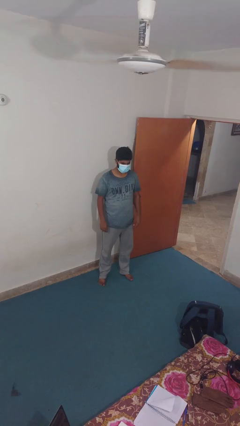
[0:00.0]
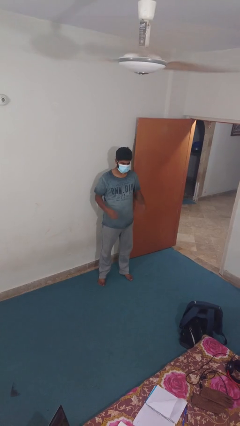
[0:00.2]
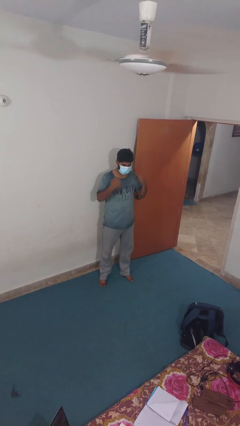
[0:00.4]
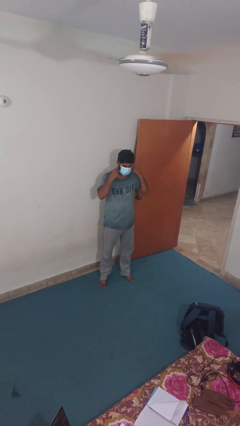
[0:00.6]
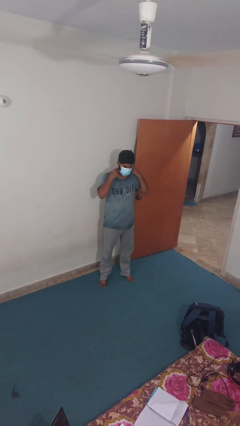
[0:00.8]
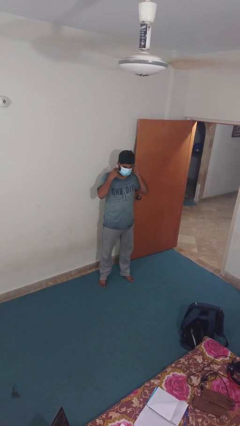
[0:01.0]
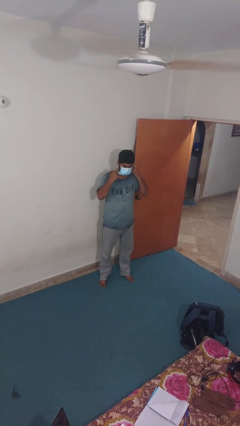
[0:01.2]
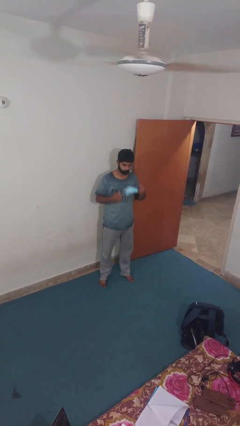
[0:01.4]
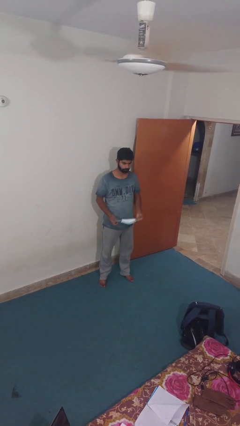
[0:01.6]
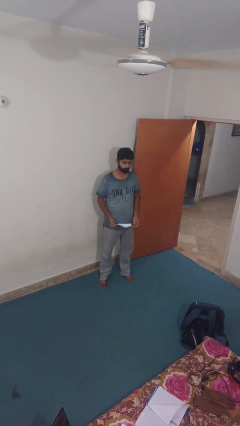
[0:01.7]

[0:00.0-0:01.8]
person takes off facemask

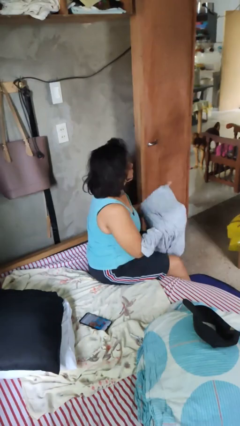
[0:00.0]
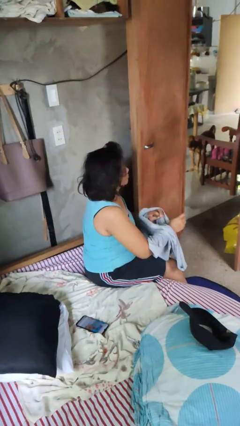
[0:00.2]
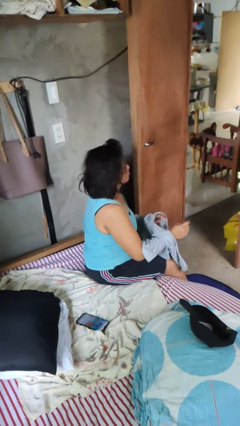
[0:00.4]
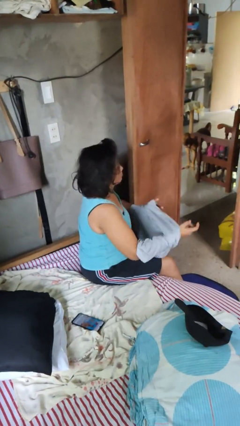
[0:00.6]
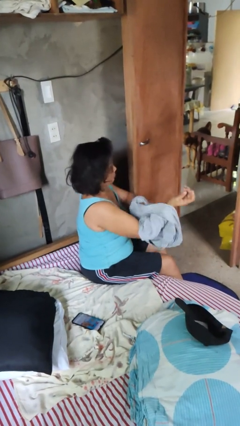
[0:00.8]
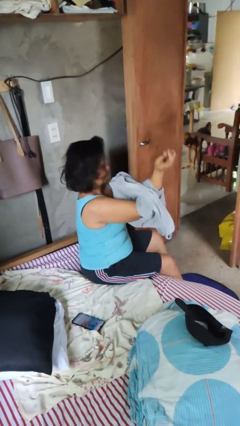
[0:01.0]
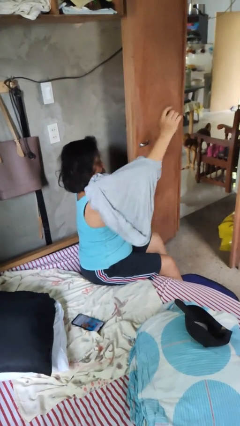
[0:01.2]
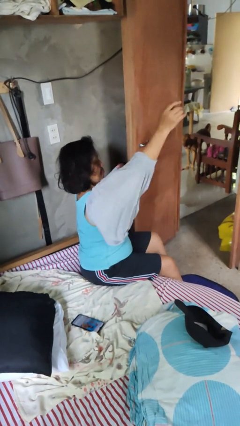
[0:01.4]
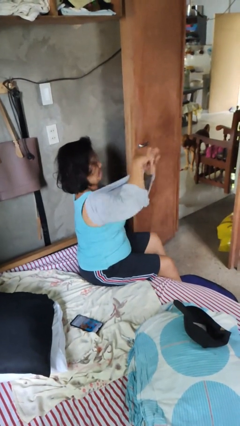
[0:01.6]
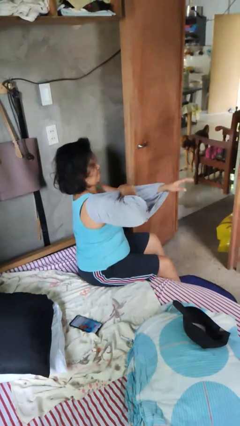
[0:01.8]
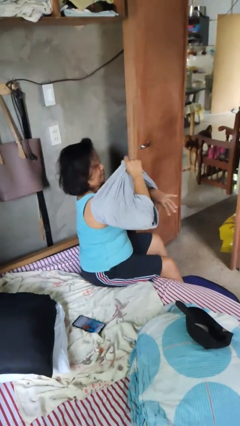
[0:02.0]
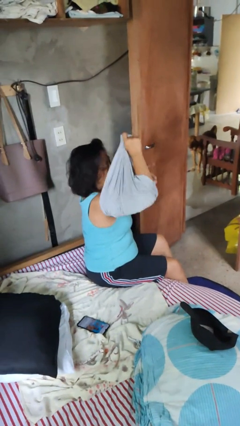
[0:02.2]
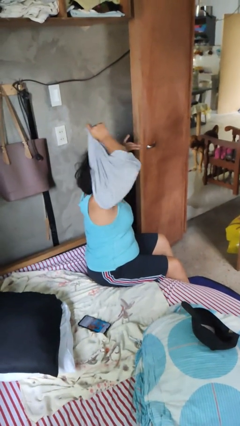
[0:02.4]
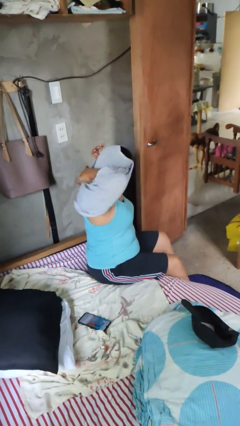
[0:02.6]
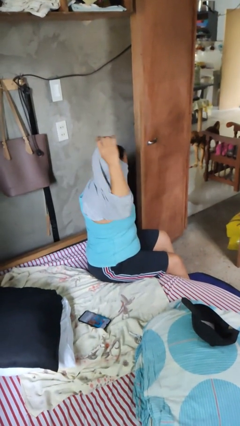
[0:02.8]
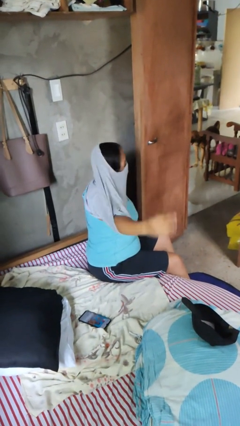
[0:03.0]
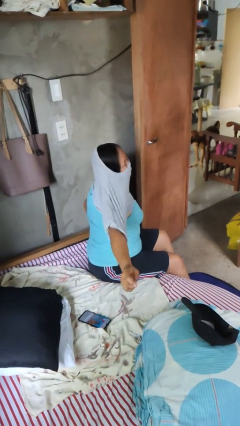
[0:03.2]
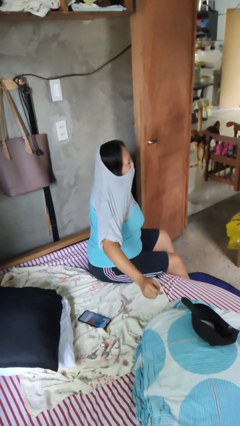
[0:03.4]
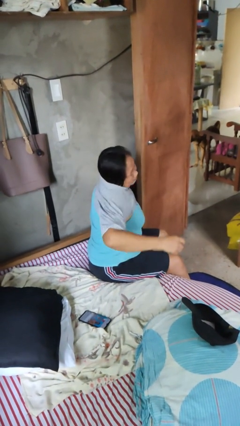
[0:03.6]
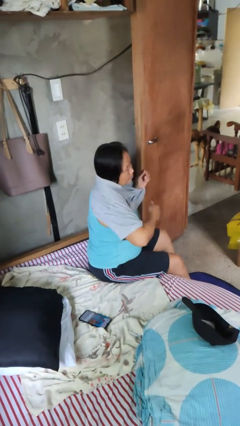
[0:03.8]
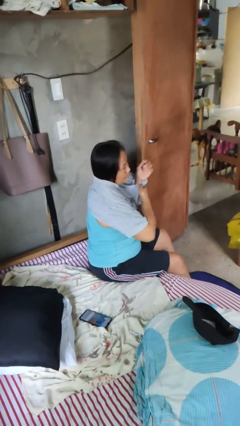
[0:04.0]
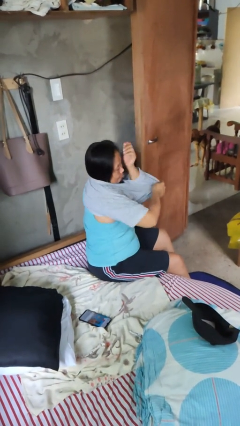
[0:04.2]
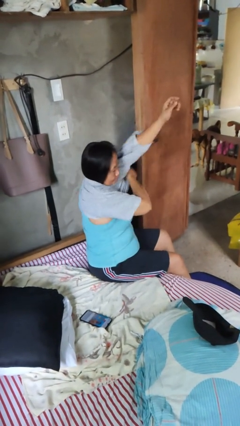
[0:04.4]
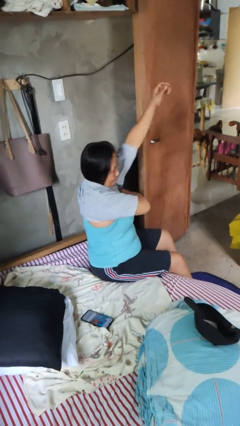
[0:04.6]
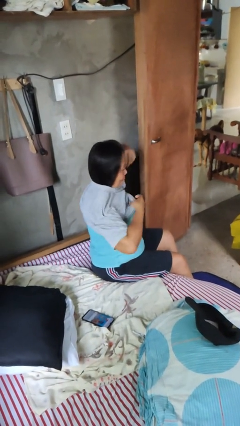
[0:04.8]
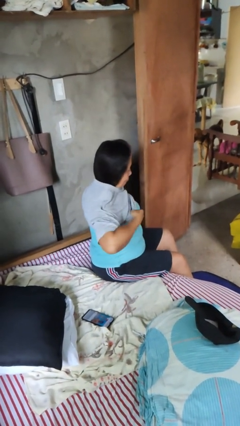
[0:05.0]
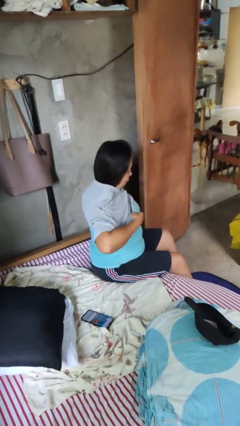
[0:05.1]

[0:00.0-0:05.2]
person puts on shirt

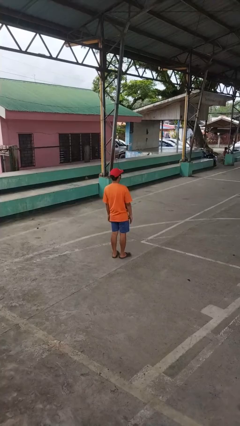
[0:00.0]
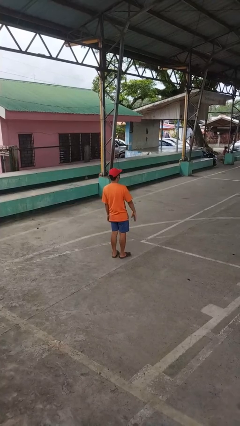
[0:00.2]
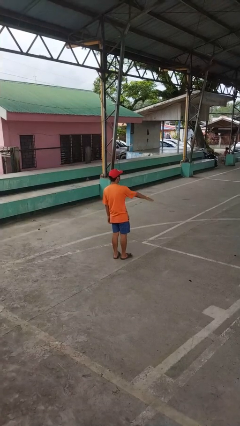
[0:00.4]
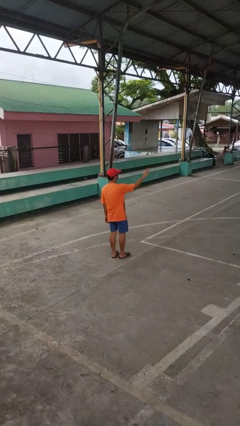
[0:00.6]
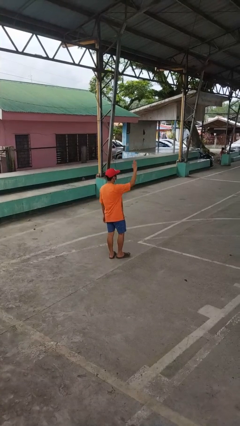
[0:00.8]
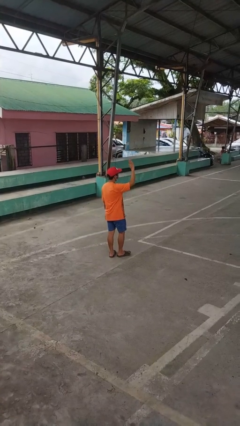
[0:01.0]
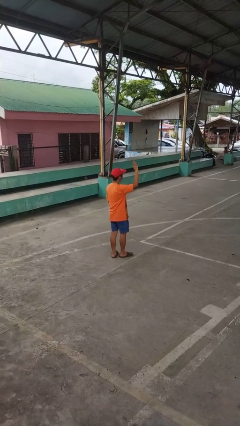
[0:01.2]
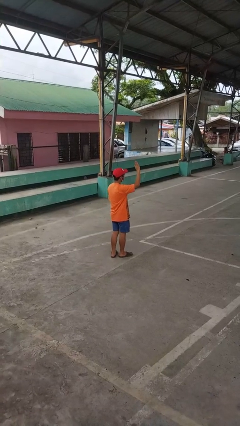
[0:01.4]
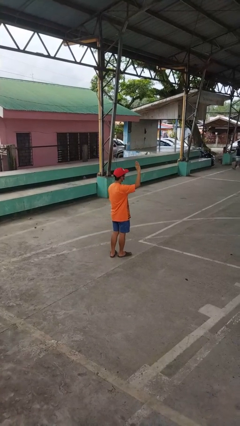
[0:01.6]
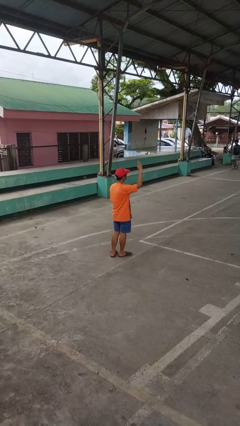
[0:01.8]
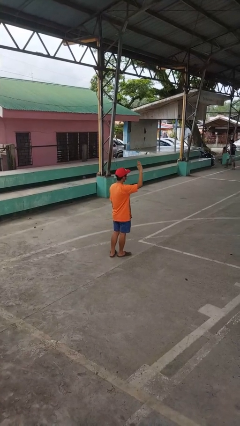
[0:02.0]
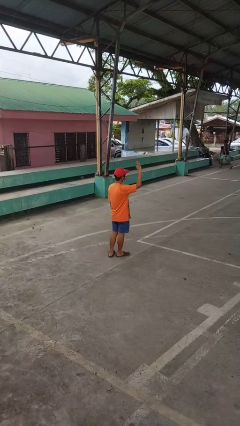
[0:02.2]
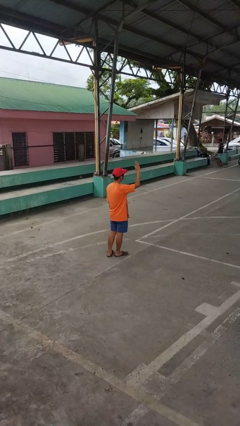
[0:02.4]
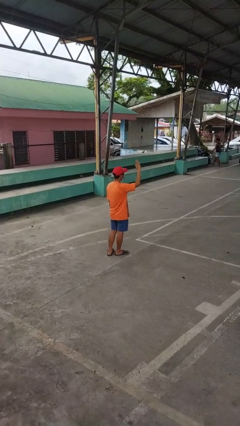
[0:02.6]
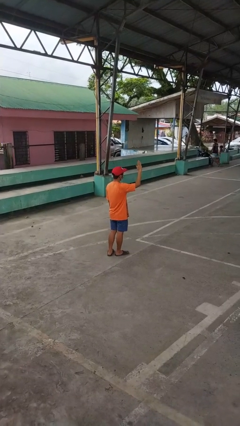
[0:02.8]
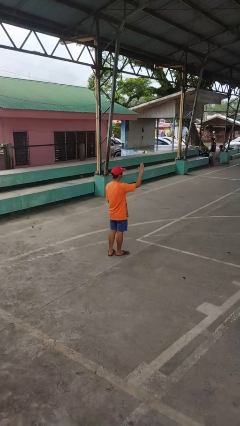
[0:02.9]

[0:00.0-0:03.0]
person gestures raise hand

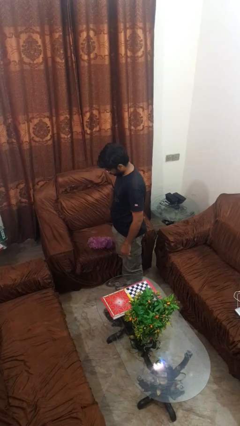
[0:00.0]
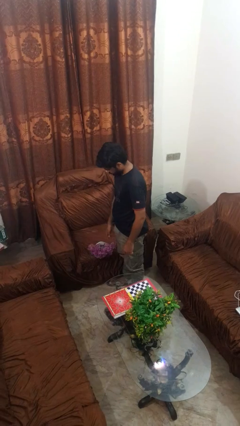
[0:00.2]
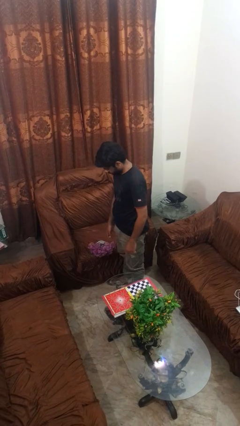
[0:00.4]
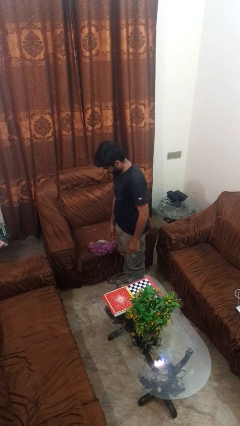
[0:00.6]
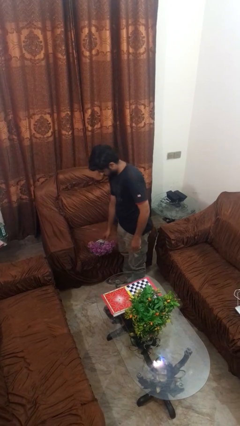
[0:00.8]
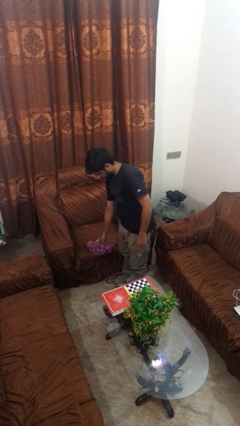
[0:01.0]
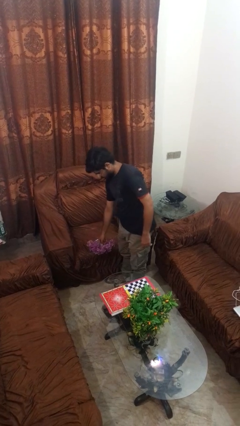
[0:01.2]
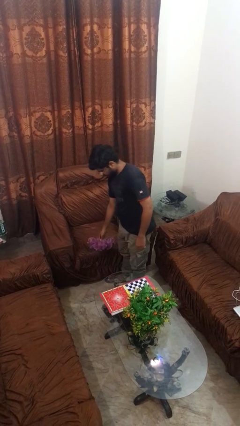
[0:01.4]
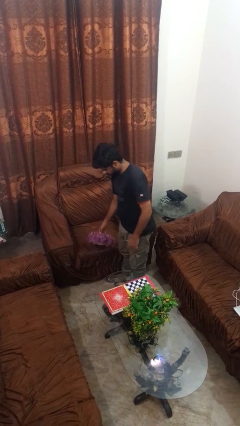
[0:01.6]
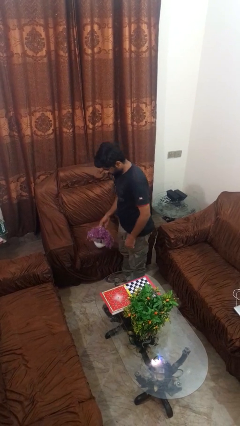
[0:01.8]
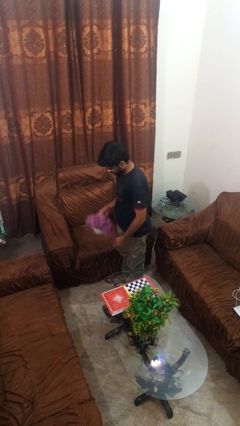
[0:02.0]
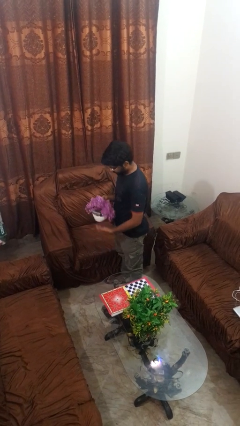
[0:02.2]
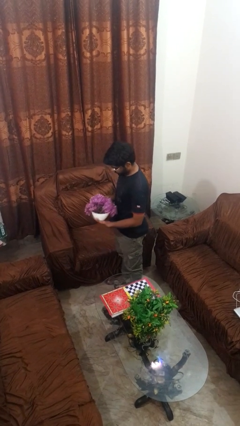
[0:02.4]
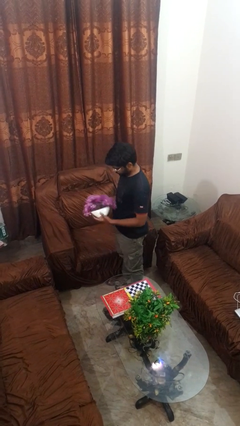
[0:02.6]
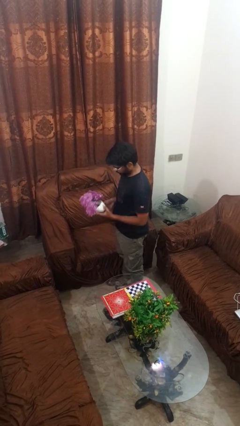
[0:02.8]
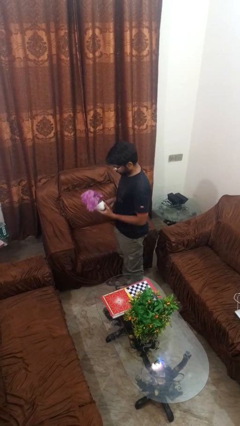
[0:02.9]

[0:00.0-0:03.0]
person picks up object from couch

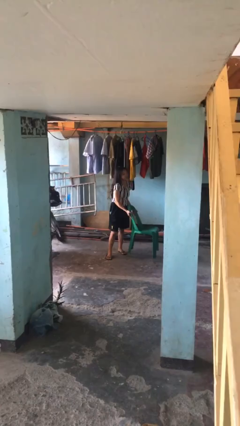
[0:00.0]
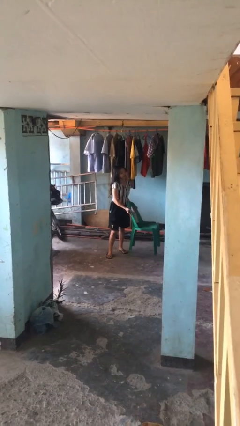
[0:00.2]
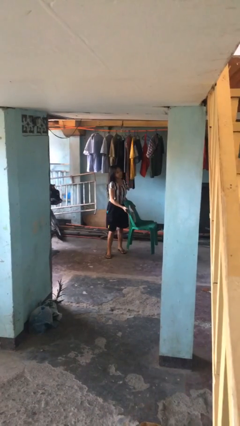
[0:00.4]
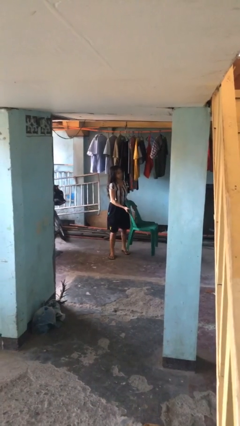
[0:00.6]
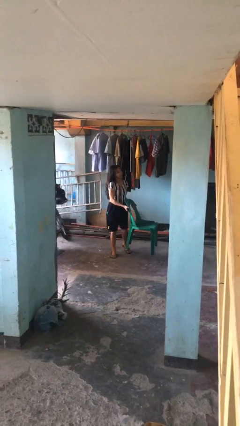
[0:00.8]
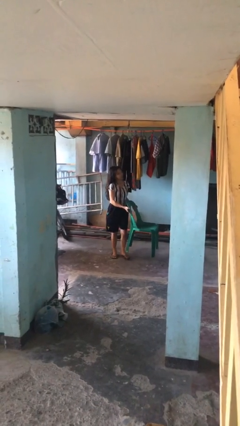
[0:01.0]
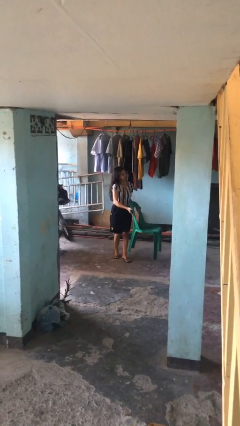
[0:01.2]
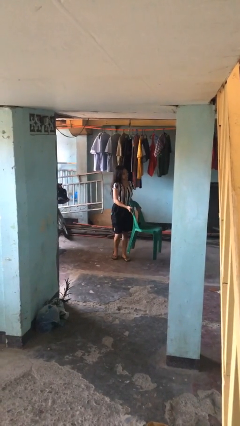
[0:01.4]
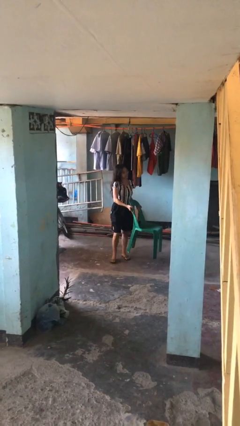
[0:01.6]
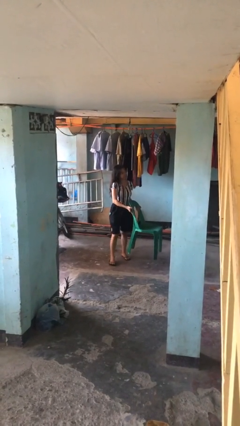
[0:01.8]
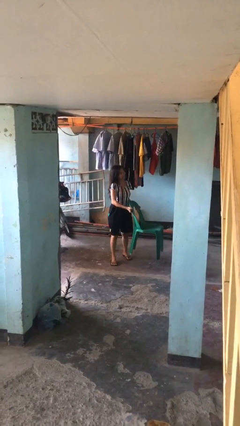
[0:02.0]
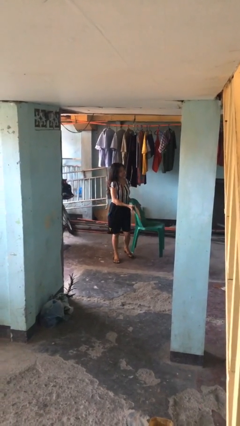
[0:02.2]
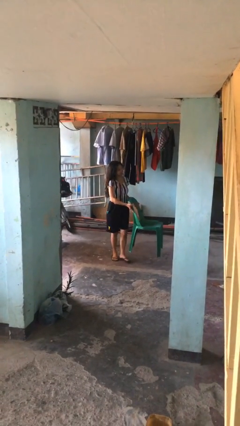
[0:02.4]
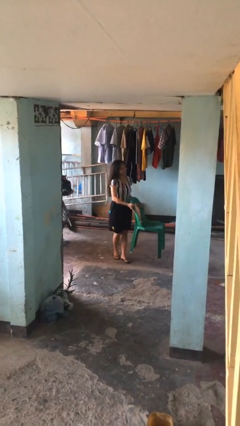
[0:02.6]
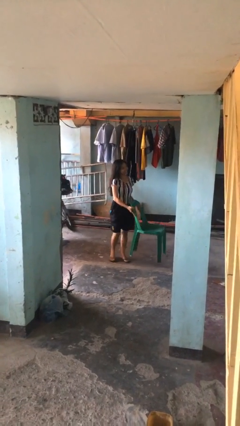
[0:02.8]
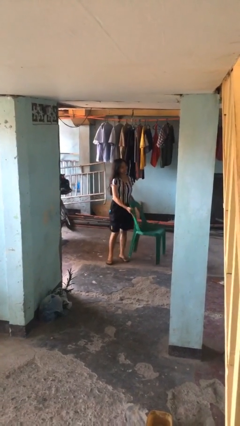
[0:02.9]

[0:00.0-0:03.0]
person carries heavy object

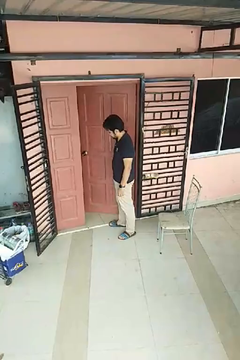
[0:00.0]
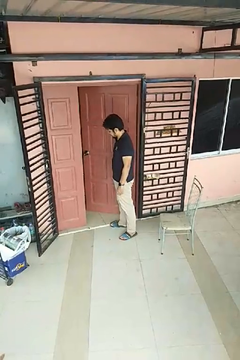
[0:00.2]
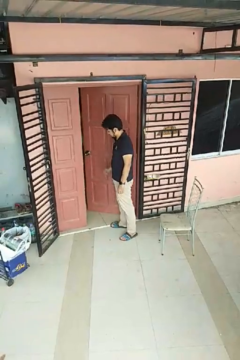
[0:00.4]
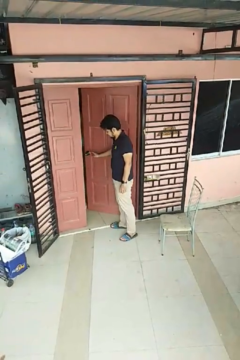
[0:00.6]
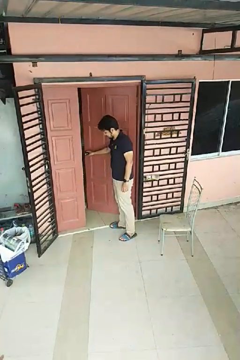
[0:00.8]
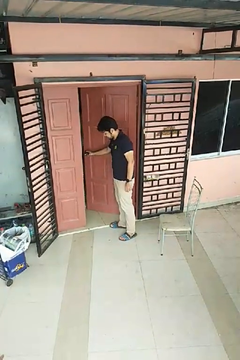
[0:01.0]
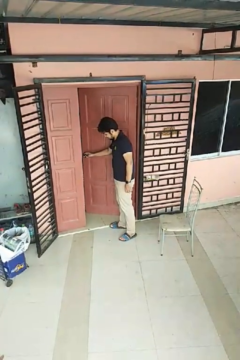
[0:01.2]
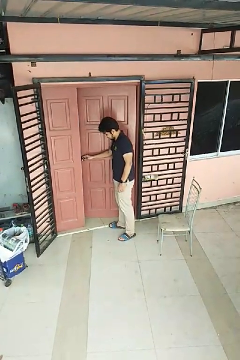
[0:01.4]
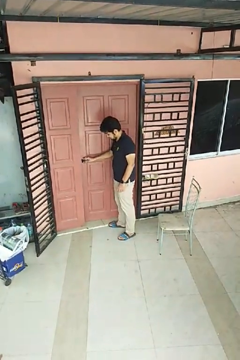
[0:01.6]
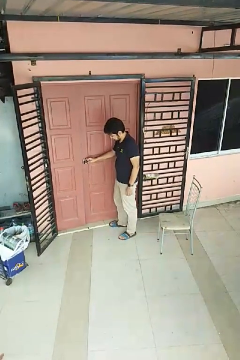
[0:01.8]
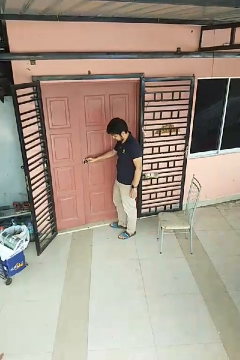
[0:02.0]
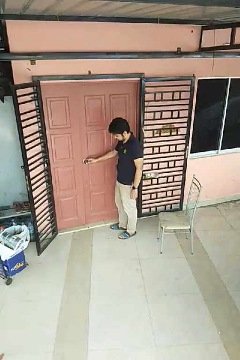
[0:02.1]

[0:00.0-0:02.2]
person closes door with foot
